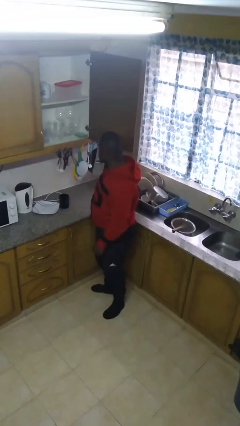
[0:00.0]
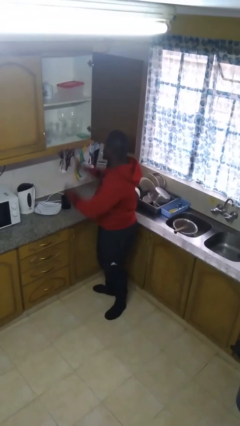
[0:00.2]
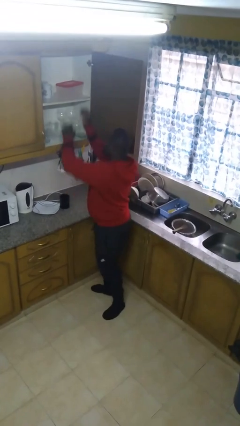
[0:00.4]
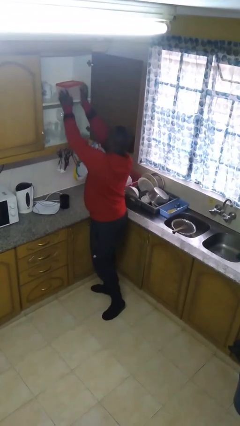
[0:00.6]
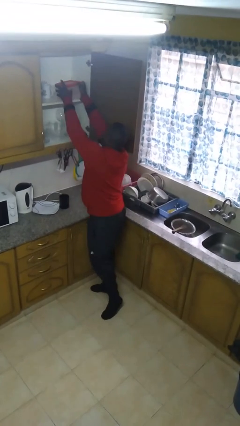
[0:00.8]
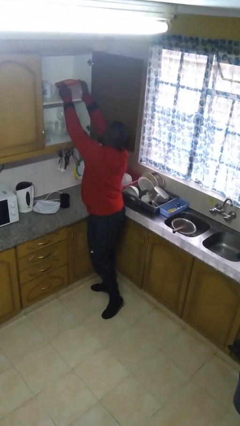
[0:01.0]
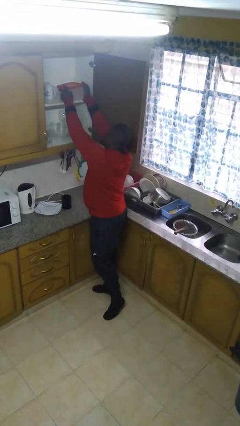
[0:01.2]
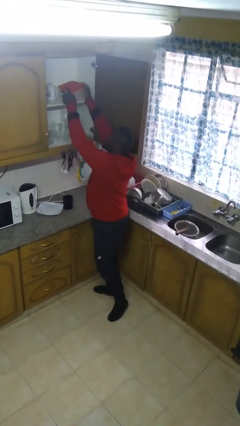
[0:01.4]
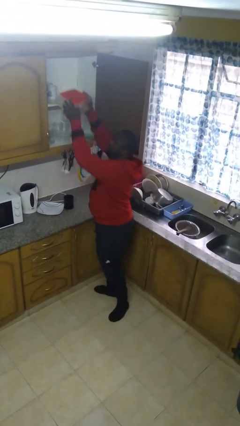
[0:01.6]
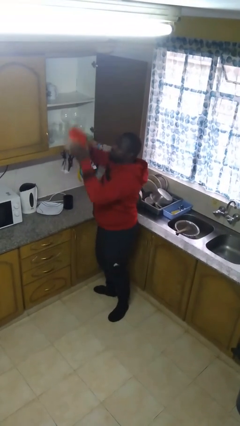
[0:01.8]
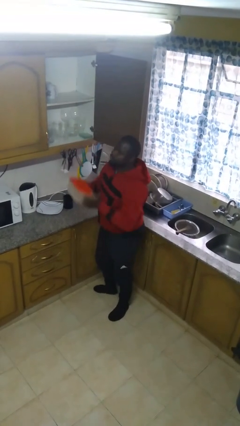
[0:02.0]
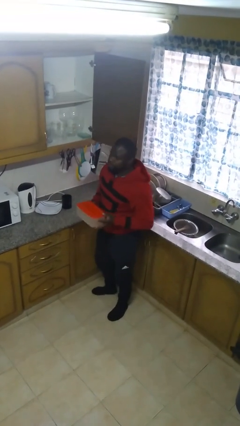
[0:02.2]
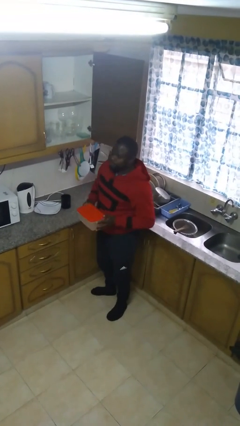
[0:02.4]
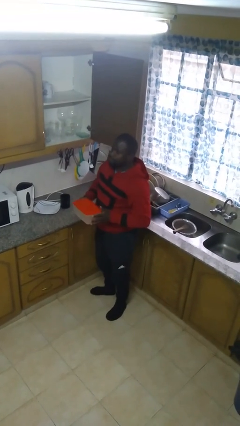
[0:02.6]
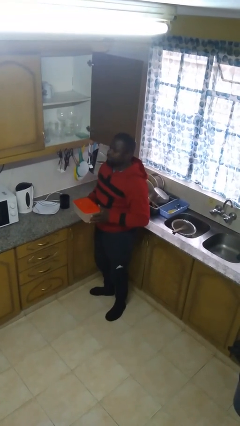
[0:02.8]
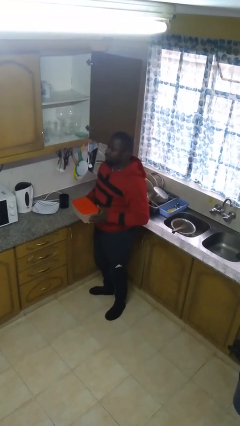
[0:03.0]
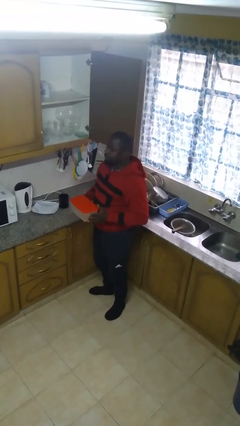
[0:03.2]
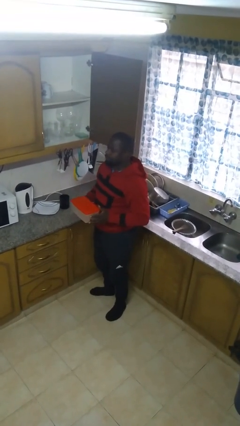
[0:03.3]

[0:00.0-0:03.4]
person picks up object from cabinet

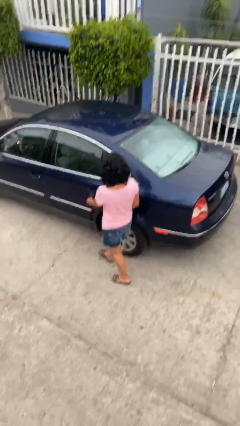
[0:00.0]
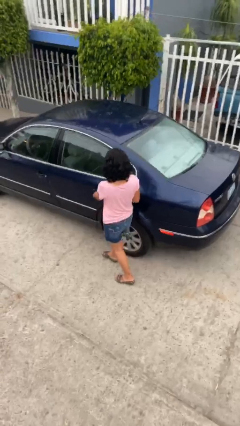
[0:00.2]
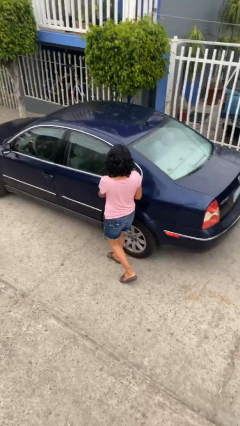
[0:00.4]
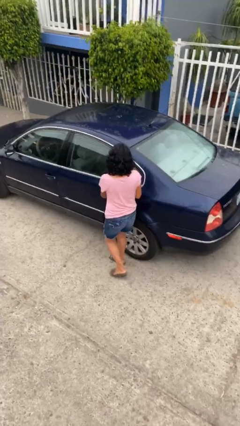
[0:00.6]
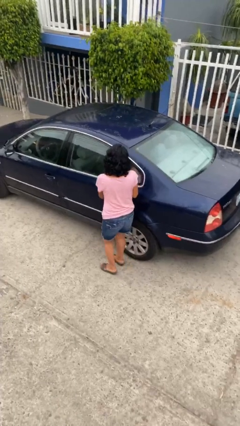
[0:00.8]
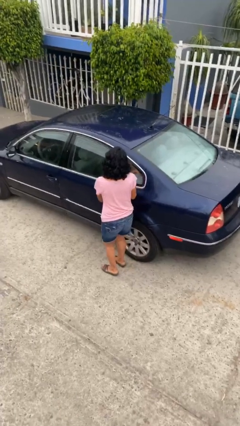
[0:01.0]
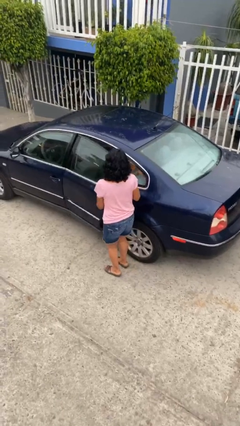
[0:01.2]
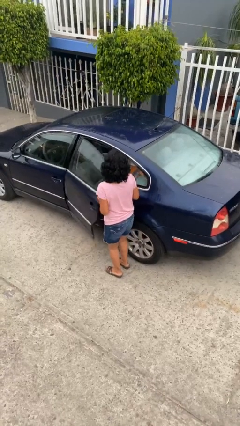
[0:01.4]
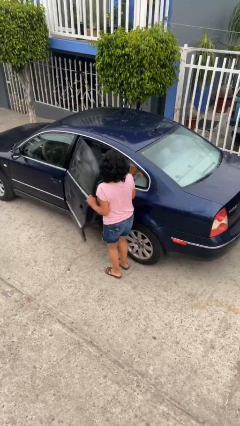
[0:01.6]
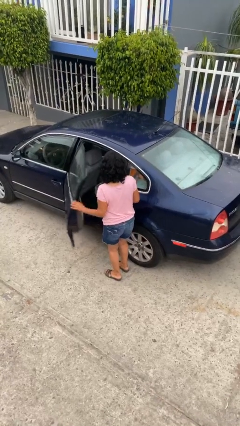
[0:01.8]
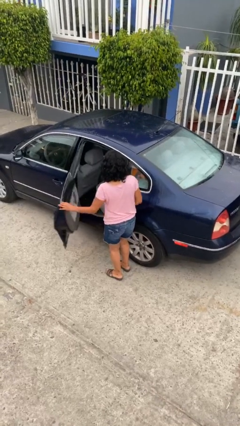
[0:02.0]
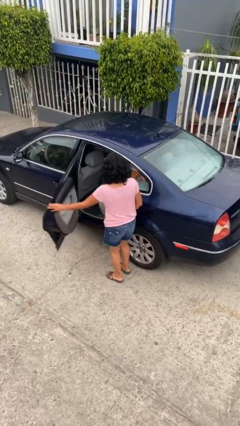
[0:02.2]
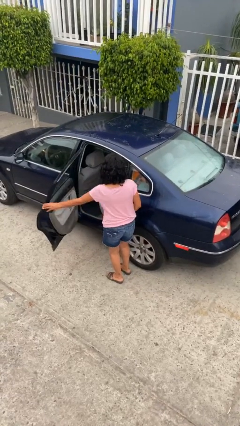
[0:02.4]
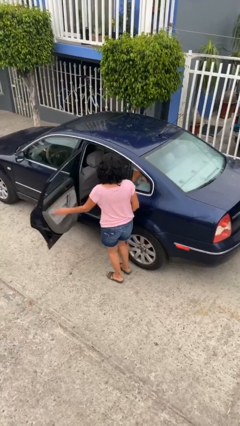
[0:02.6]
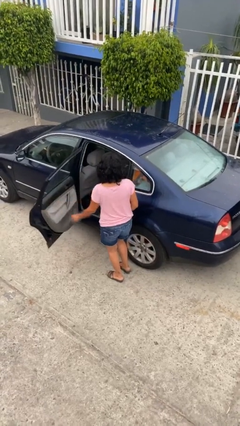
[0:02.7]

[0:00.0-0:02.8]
person opens car door

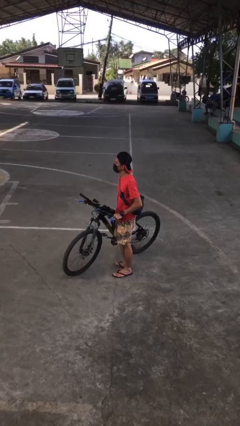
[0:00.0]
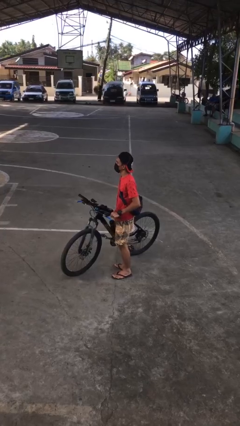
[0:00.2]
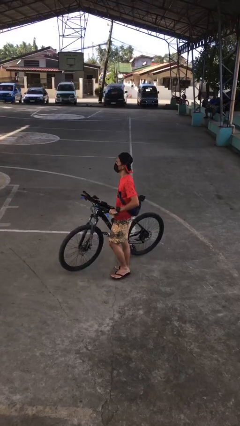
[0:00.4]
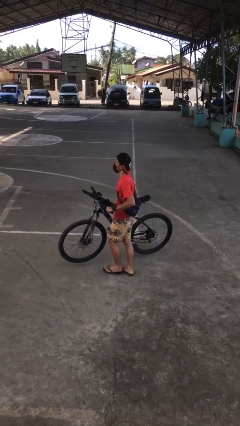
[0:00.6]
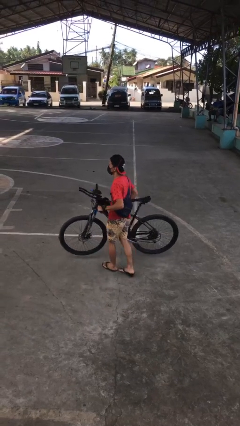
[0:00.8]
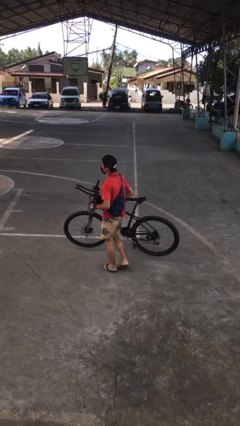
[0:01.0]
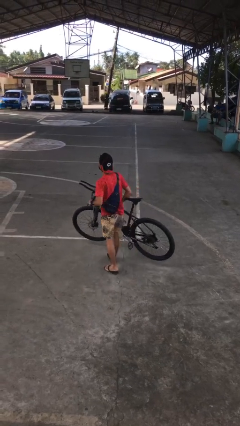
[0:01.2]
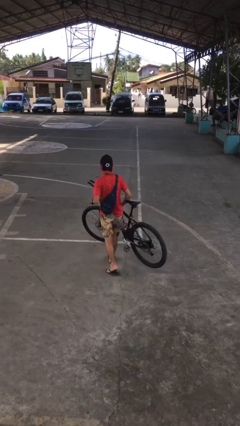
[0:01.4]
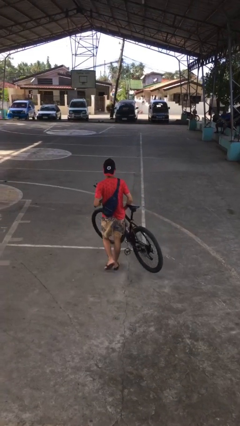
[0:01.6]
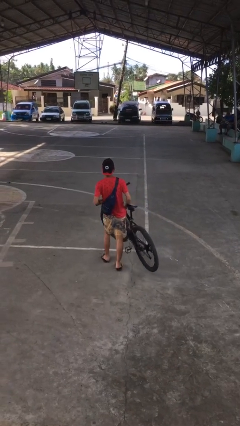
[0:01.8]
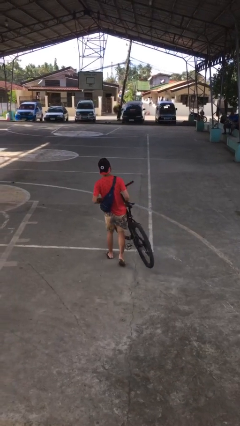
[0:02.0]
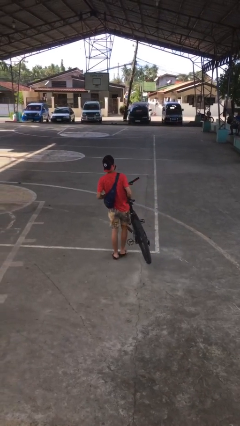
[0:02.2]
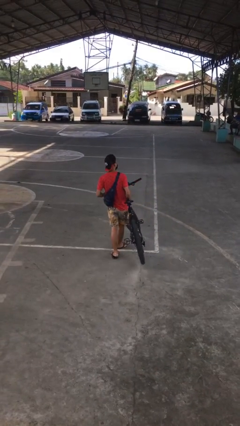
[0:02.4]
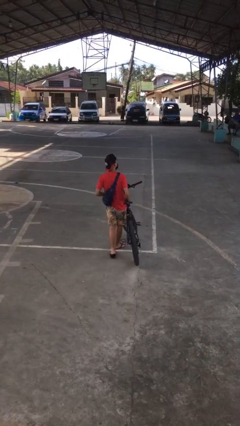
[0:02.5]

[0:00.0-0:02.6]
person carries bicycle

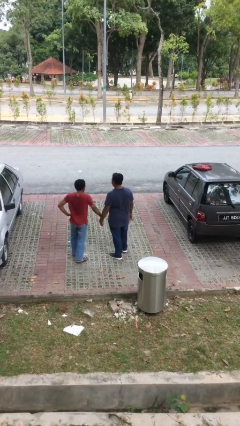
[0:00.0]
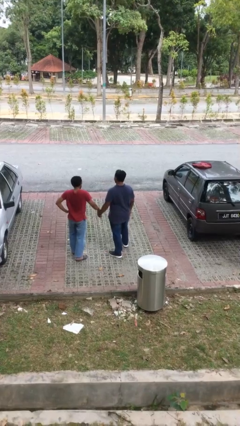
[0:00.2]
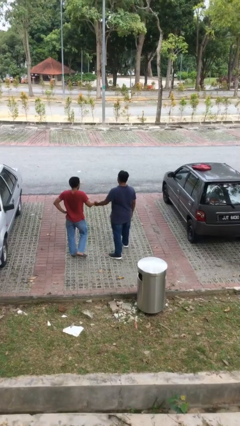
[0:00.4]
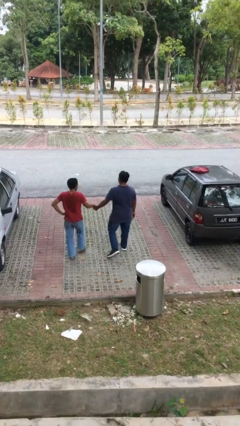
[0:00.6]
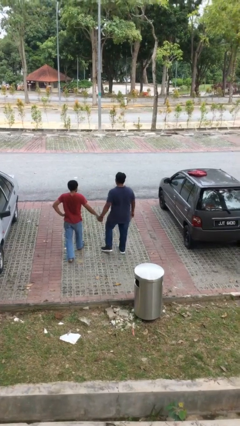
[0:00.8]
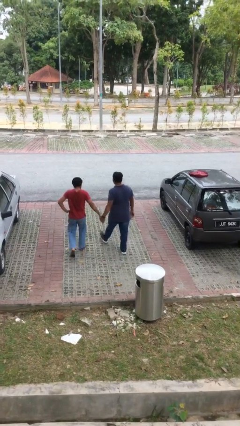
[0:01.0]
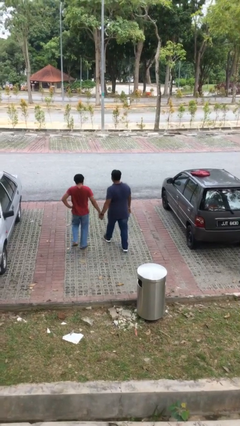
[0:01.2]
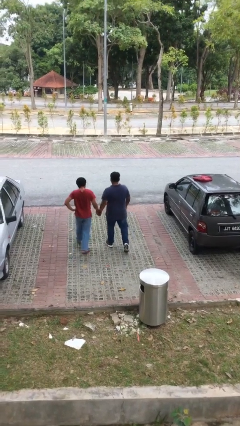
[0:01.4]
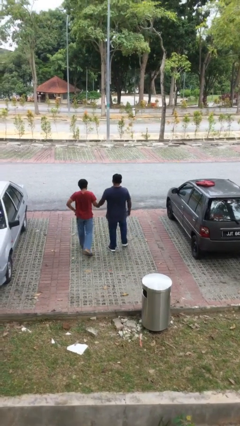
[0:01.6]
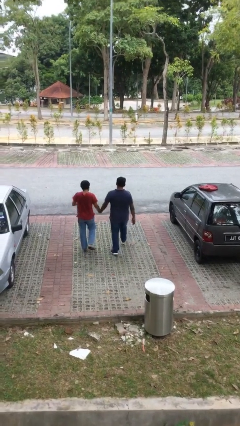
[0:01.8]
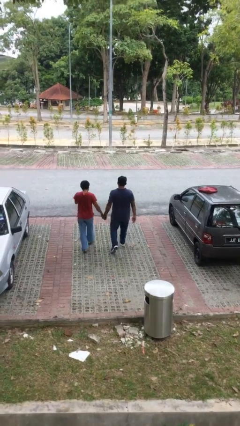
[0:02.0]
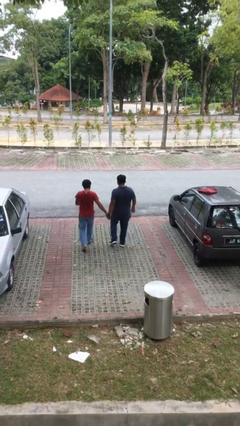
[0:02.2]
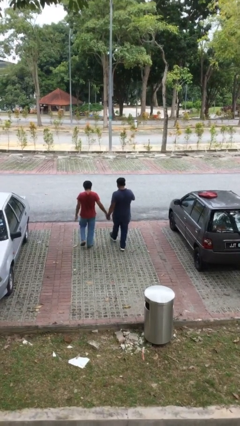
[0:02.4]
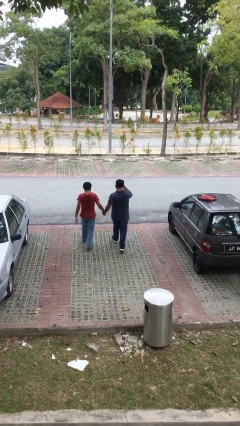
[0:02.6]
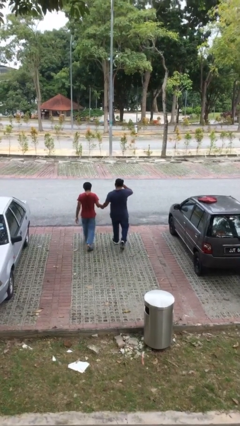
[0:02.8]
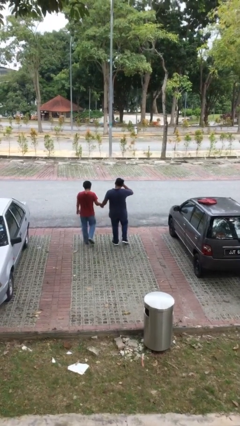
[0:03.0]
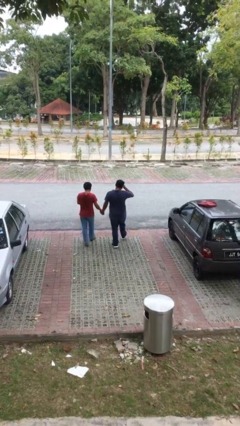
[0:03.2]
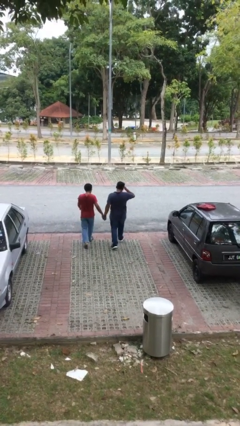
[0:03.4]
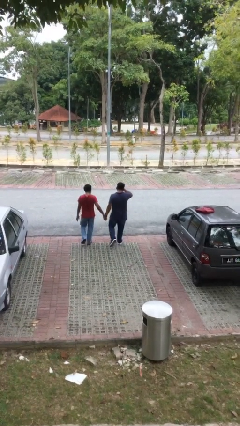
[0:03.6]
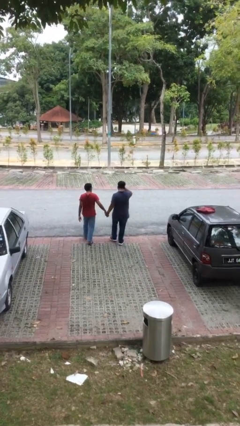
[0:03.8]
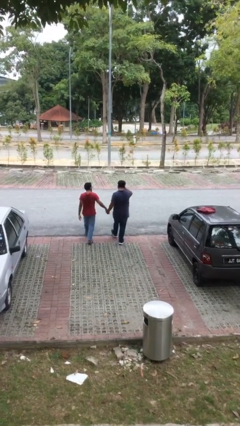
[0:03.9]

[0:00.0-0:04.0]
person holds hand

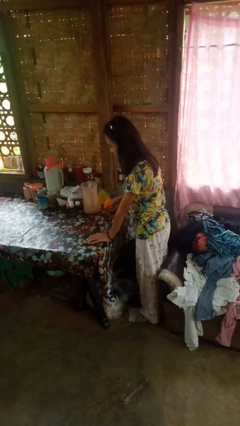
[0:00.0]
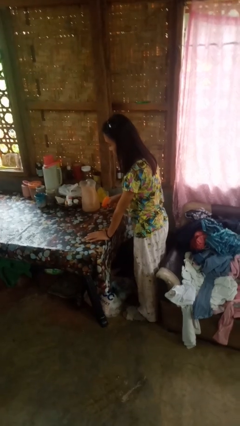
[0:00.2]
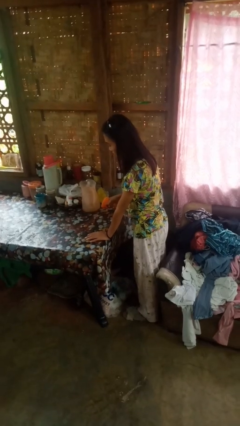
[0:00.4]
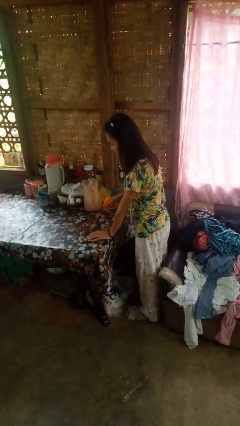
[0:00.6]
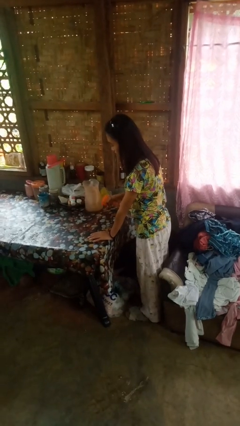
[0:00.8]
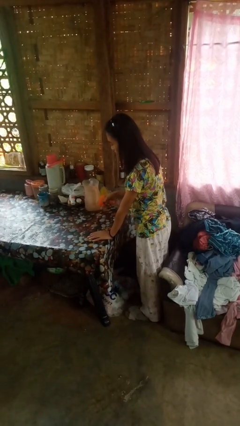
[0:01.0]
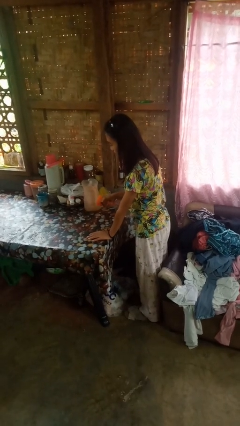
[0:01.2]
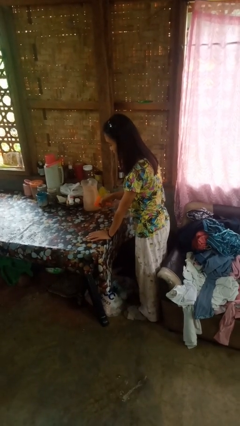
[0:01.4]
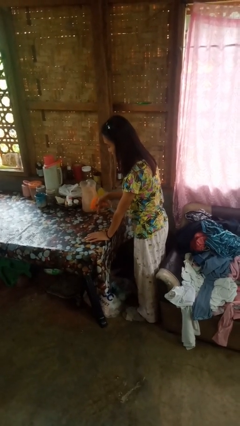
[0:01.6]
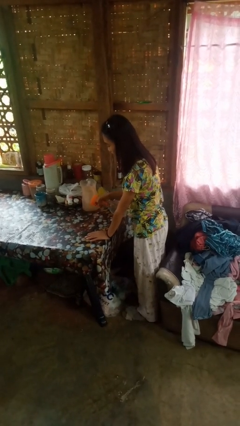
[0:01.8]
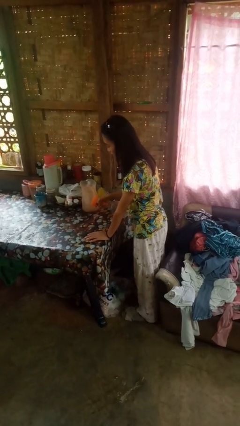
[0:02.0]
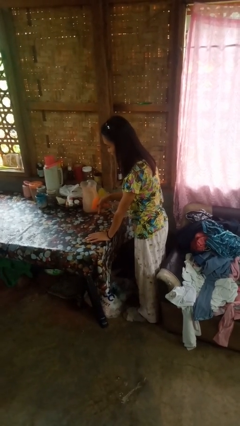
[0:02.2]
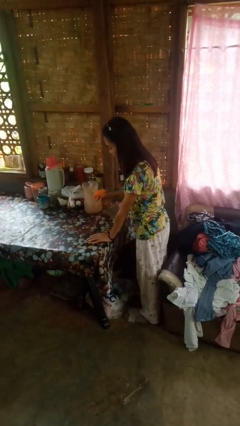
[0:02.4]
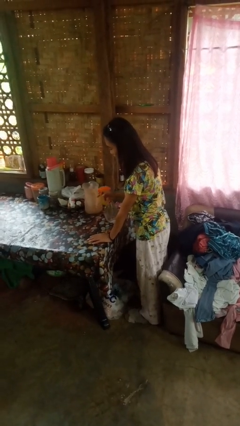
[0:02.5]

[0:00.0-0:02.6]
person sprays from bottle

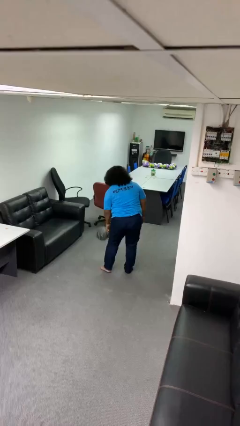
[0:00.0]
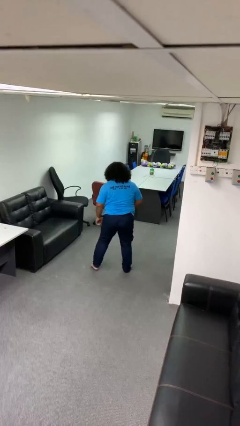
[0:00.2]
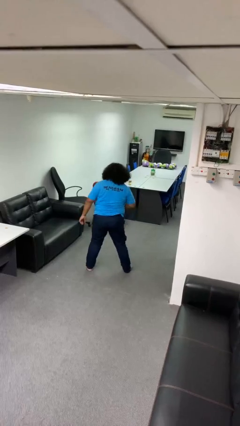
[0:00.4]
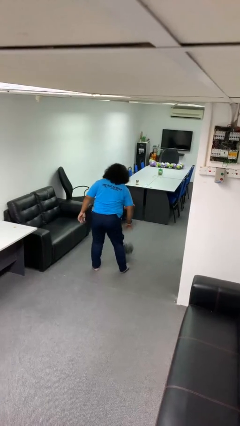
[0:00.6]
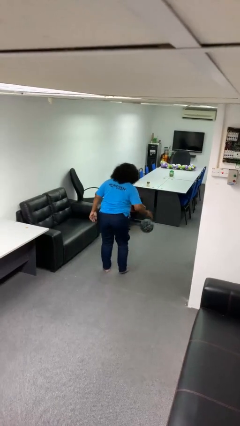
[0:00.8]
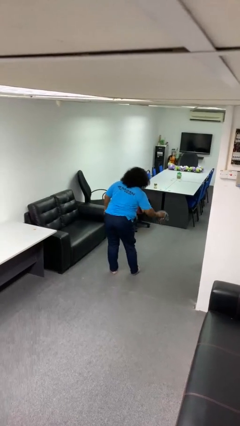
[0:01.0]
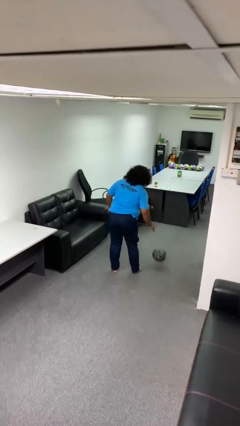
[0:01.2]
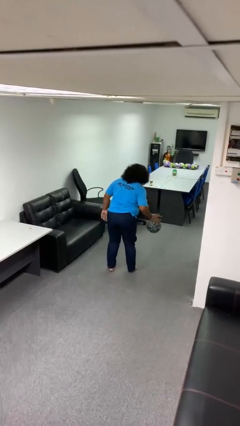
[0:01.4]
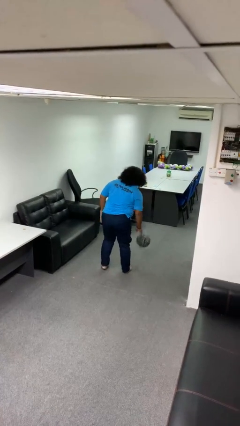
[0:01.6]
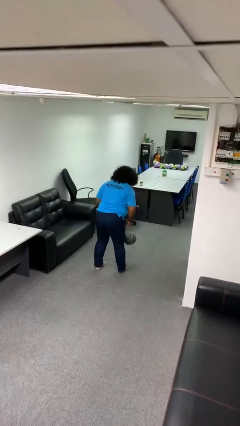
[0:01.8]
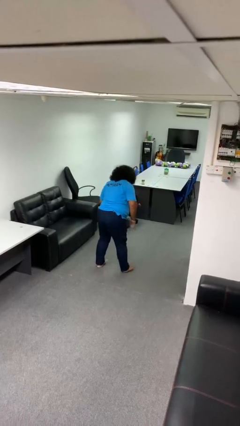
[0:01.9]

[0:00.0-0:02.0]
person bounces ball on floor

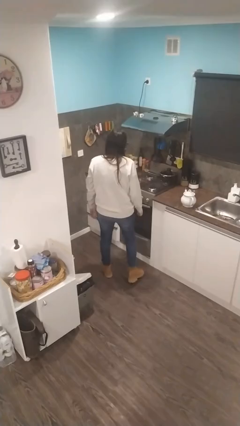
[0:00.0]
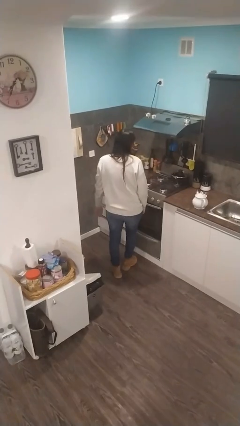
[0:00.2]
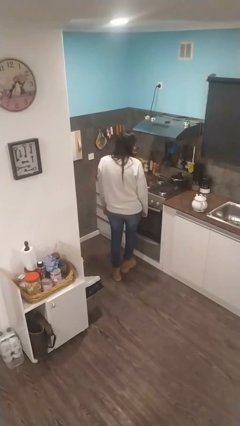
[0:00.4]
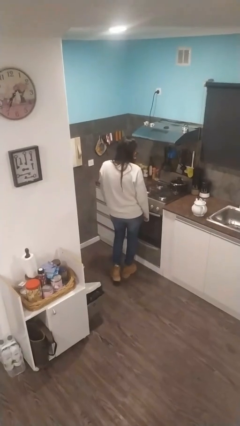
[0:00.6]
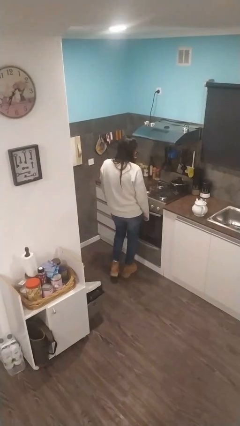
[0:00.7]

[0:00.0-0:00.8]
person picks up object from countertop
